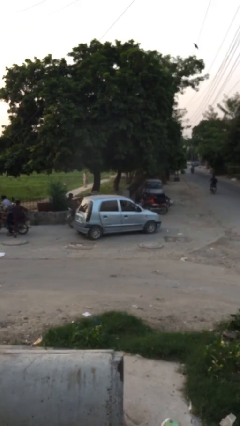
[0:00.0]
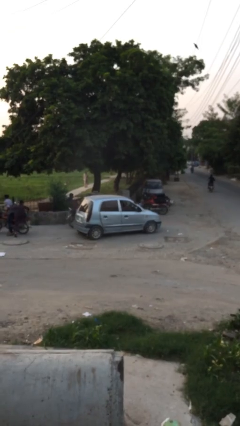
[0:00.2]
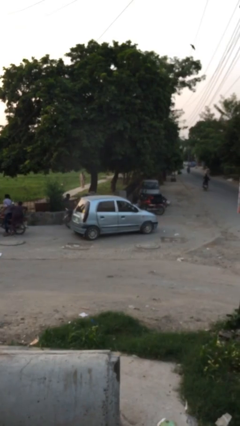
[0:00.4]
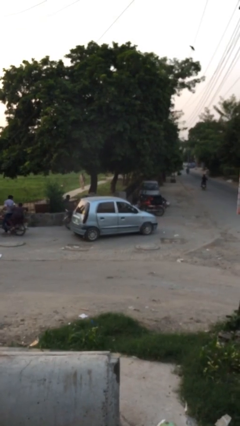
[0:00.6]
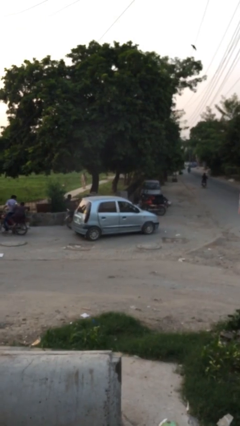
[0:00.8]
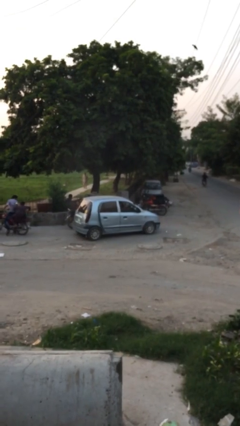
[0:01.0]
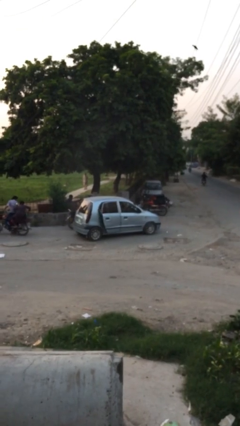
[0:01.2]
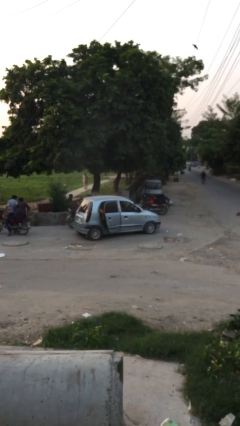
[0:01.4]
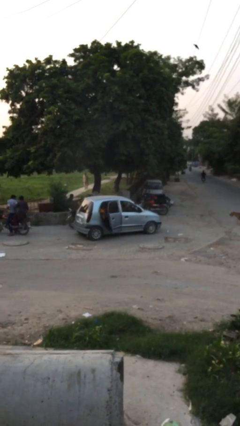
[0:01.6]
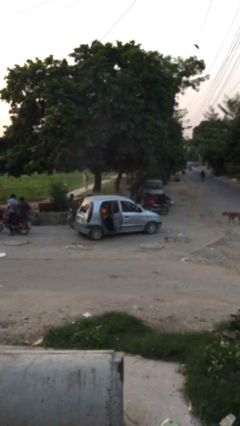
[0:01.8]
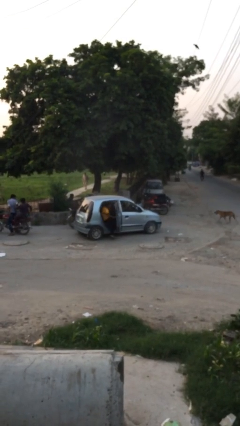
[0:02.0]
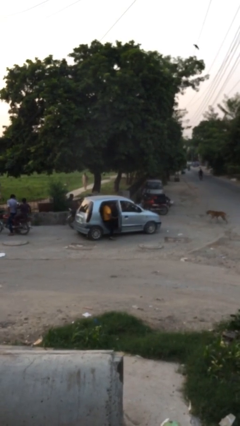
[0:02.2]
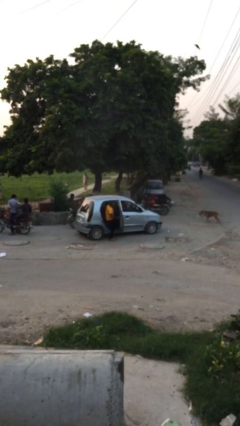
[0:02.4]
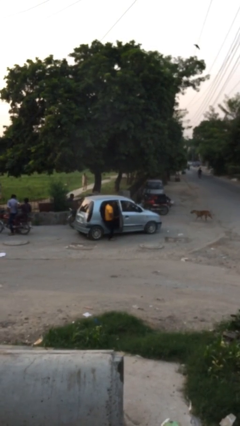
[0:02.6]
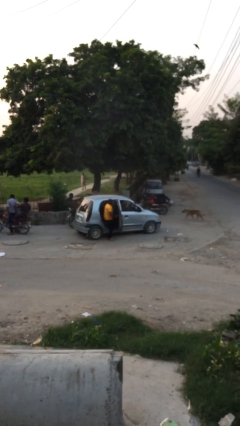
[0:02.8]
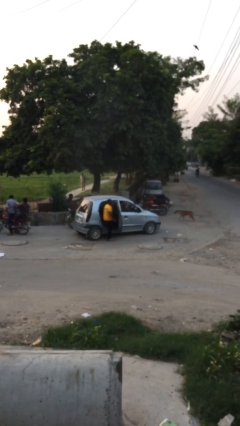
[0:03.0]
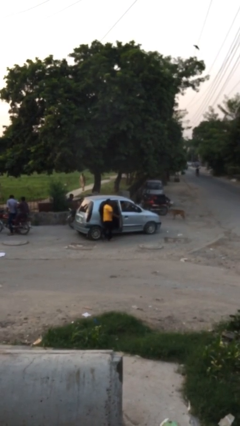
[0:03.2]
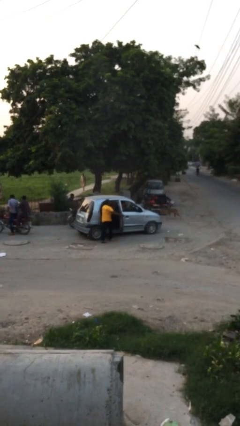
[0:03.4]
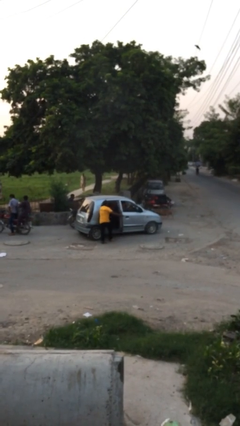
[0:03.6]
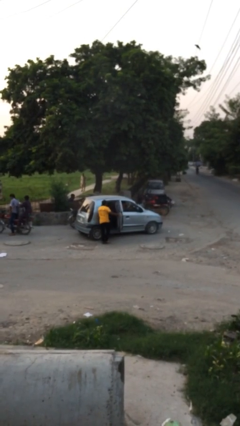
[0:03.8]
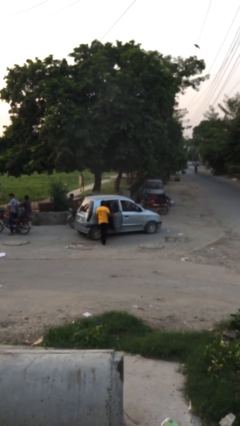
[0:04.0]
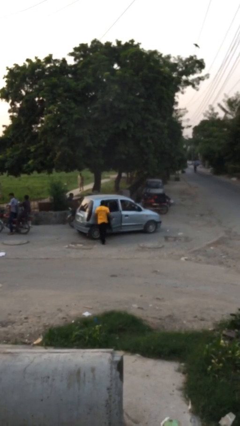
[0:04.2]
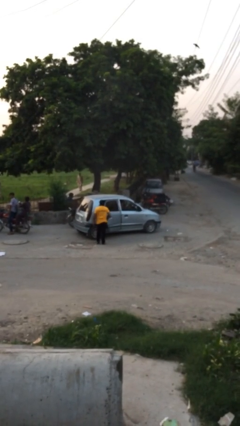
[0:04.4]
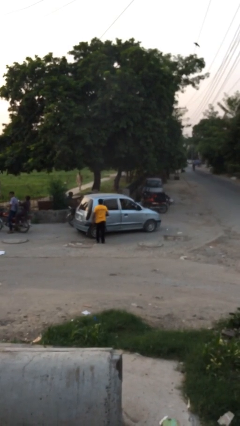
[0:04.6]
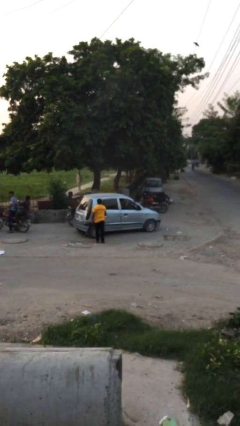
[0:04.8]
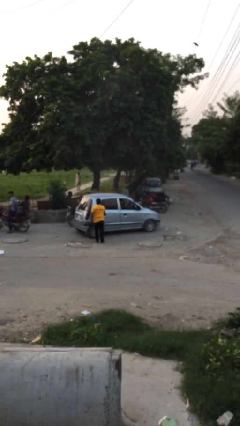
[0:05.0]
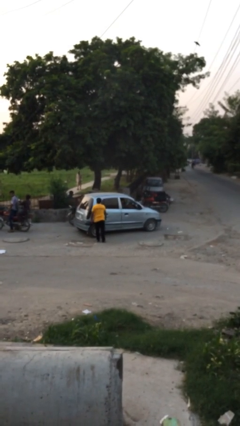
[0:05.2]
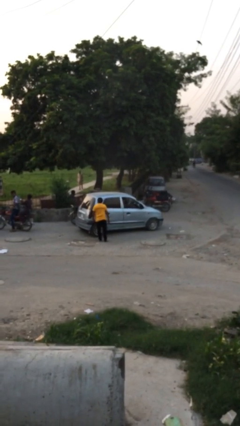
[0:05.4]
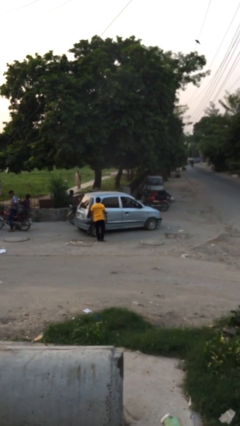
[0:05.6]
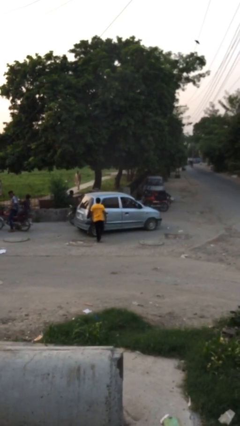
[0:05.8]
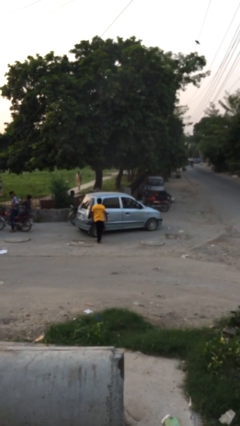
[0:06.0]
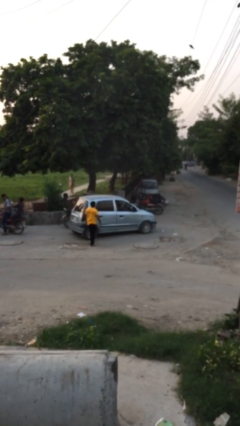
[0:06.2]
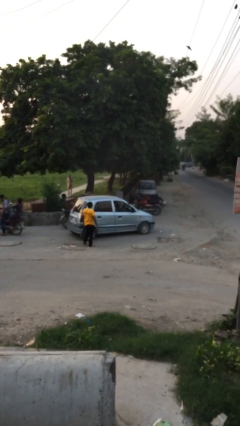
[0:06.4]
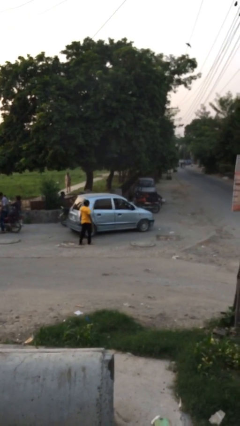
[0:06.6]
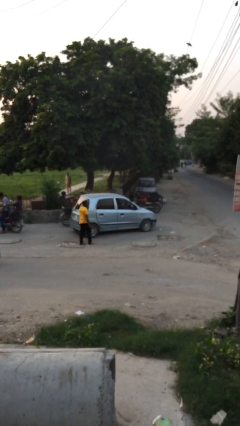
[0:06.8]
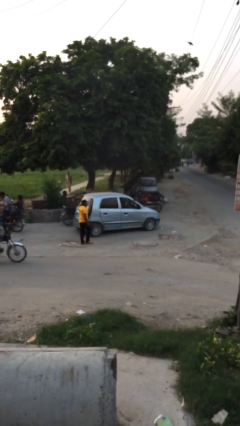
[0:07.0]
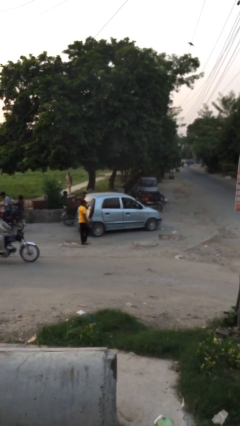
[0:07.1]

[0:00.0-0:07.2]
car drops off person

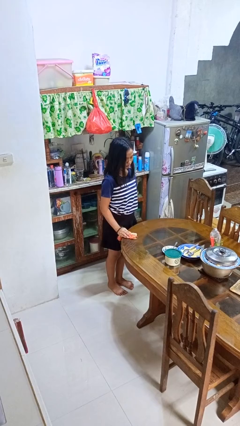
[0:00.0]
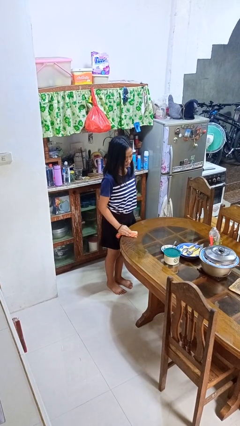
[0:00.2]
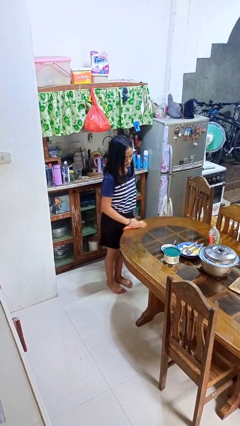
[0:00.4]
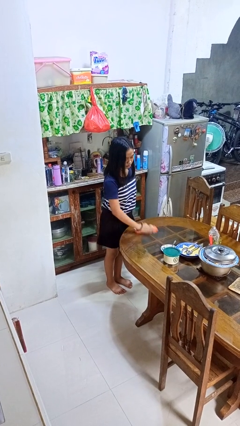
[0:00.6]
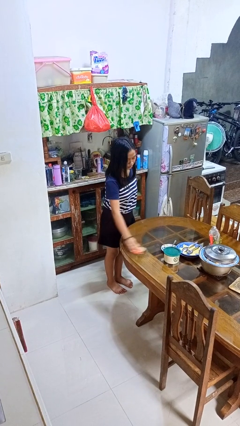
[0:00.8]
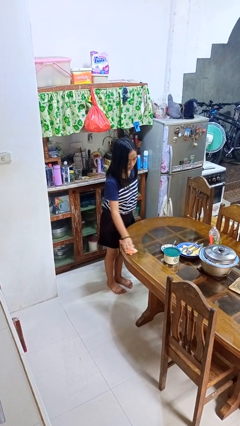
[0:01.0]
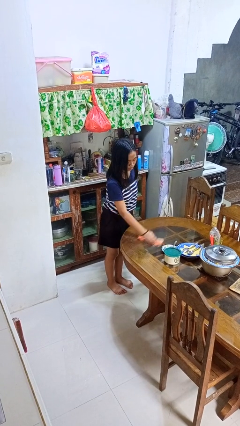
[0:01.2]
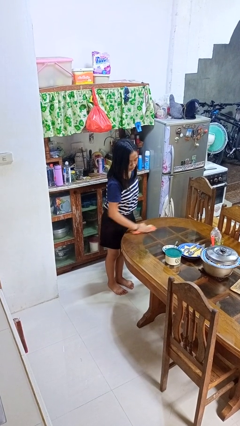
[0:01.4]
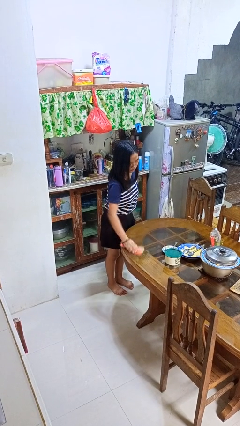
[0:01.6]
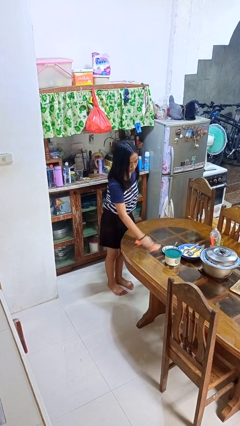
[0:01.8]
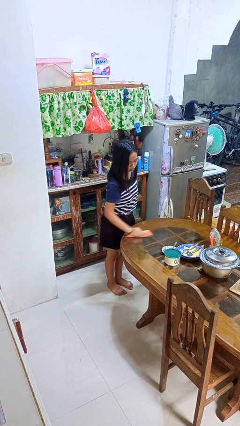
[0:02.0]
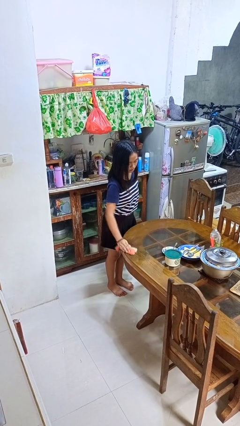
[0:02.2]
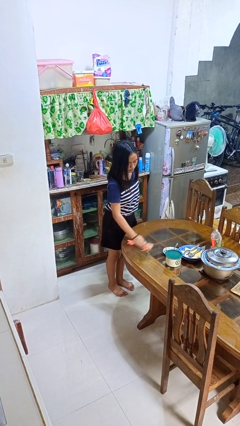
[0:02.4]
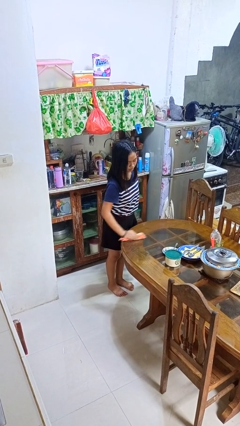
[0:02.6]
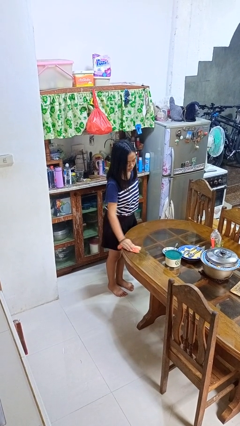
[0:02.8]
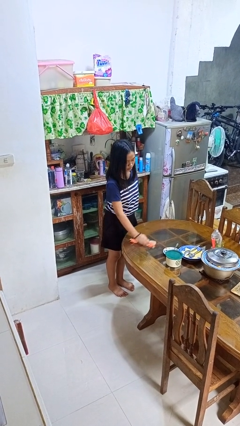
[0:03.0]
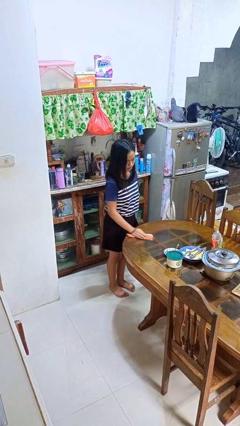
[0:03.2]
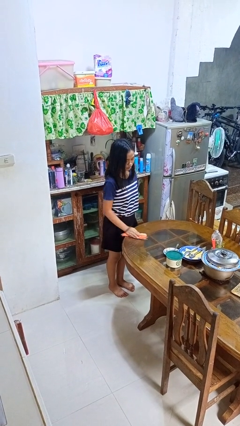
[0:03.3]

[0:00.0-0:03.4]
person cleans table with rag

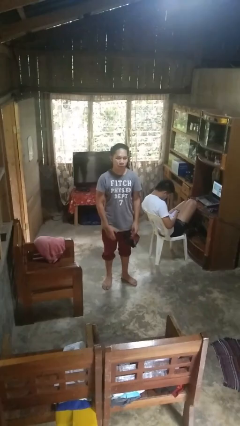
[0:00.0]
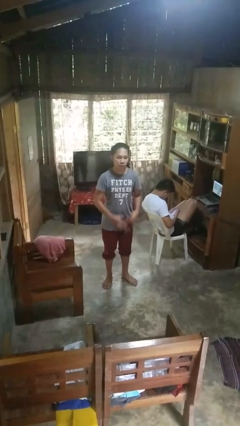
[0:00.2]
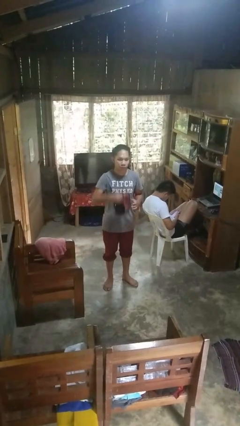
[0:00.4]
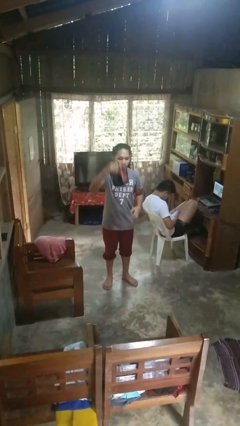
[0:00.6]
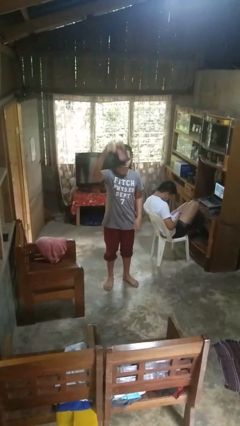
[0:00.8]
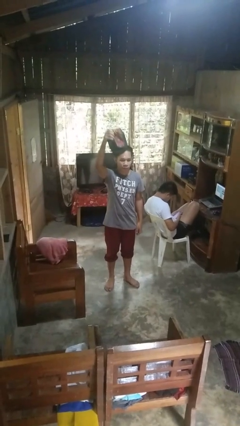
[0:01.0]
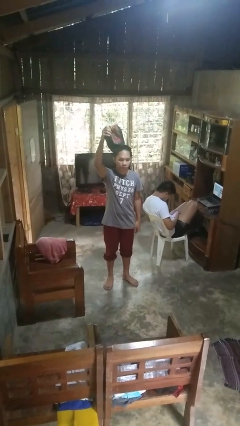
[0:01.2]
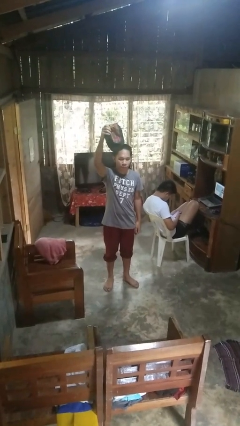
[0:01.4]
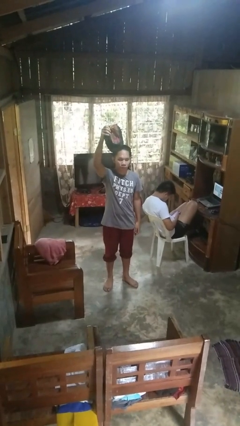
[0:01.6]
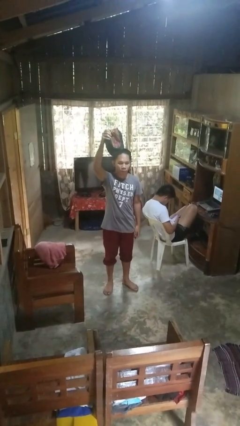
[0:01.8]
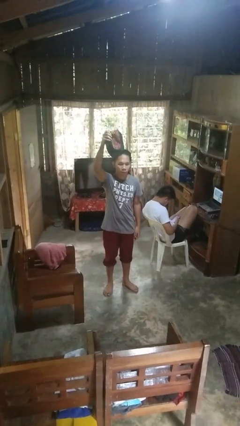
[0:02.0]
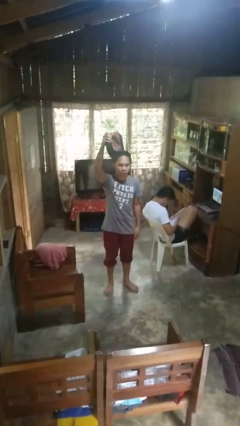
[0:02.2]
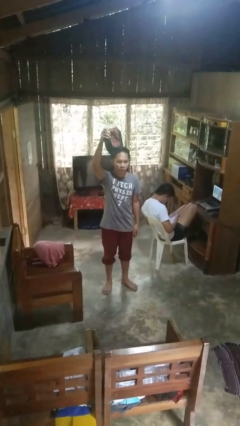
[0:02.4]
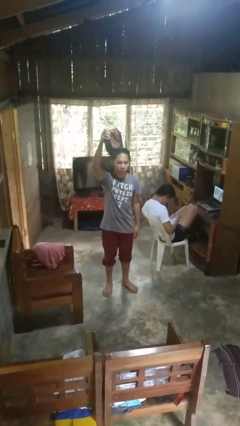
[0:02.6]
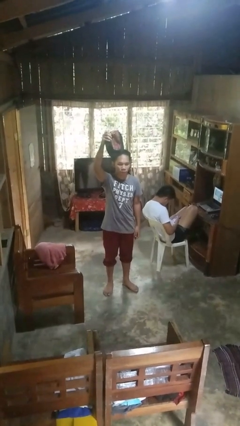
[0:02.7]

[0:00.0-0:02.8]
person holds object above head

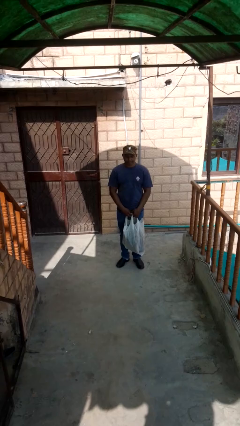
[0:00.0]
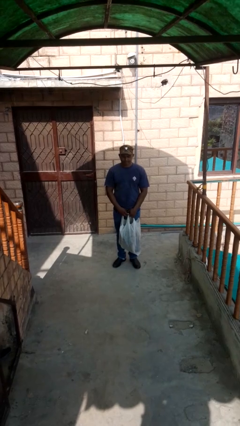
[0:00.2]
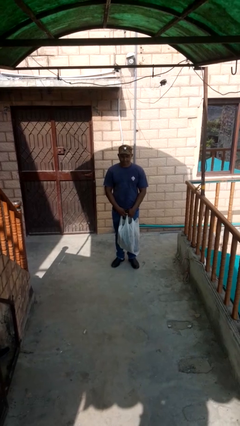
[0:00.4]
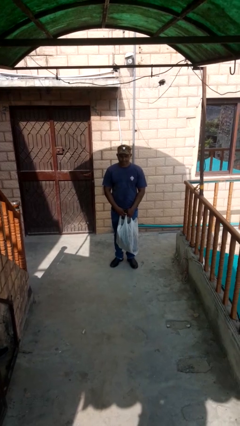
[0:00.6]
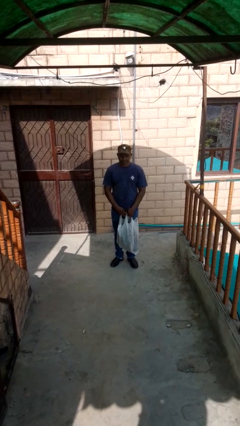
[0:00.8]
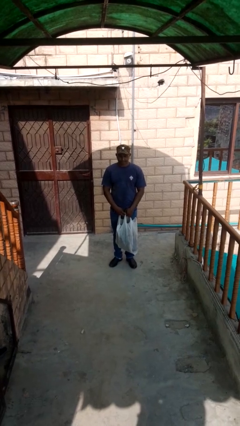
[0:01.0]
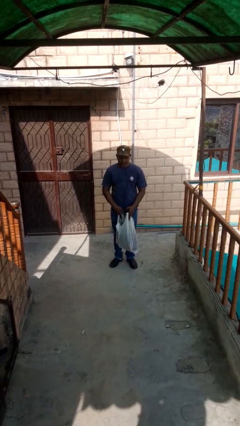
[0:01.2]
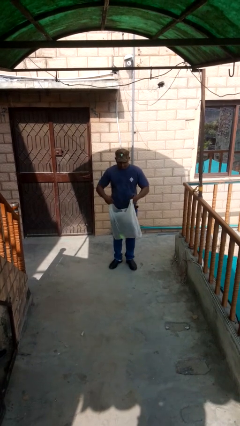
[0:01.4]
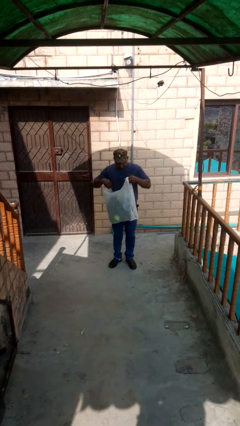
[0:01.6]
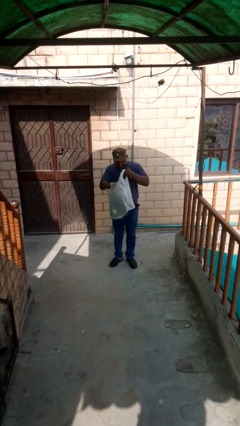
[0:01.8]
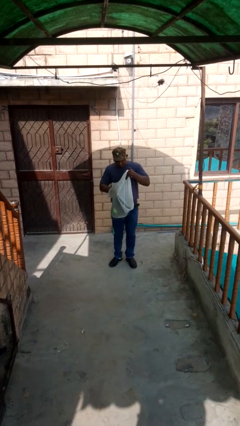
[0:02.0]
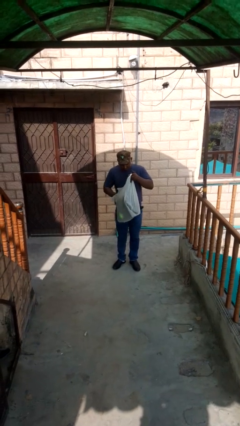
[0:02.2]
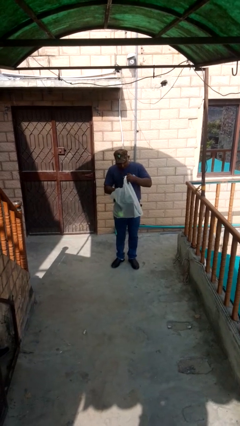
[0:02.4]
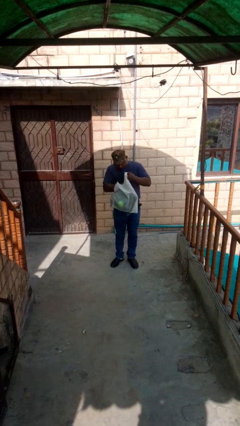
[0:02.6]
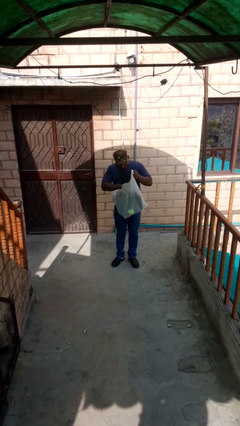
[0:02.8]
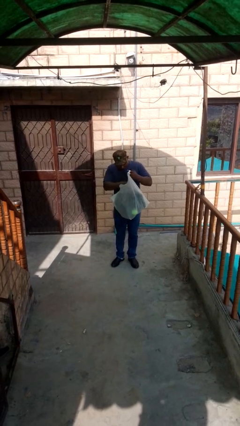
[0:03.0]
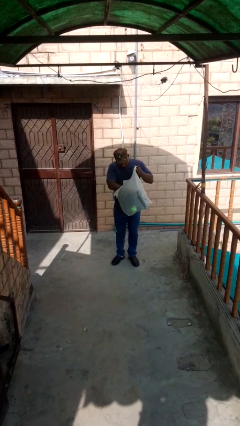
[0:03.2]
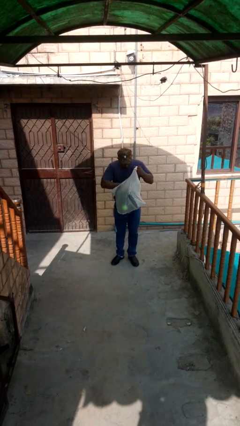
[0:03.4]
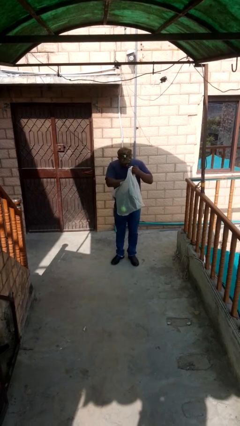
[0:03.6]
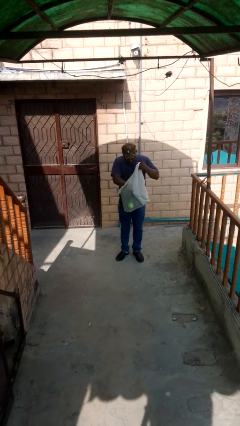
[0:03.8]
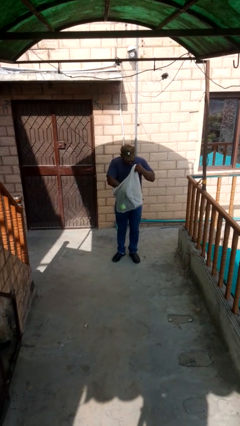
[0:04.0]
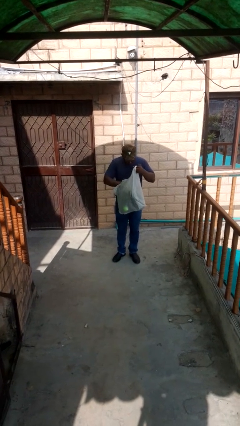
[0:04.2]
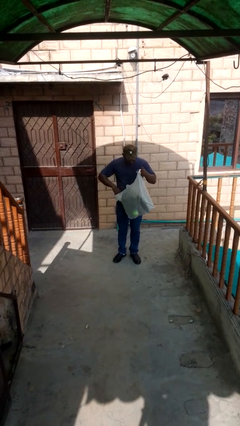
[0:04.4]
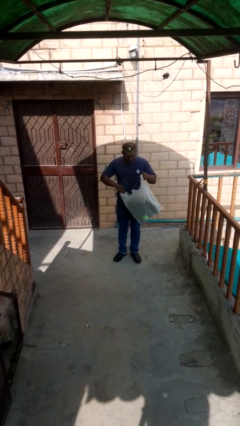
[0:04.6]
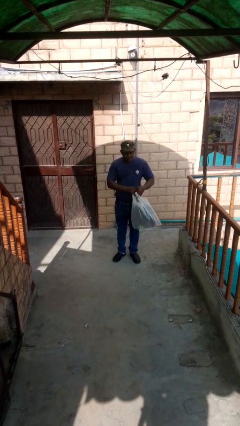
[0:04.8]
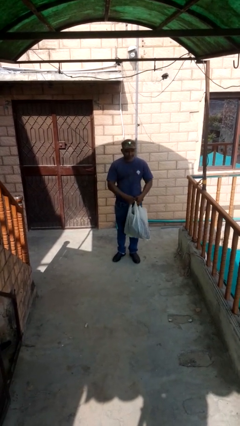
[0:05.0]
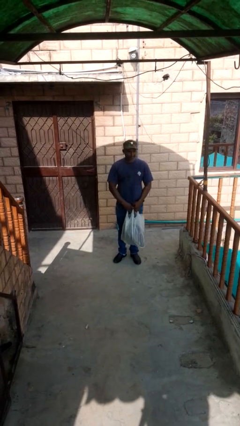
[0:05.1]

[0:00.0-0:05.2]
person searches in bag
